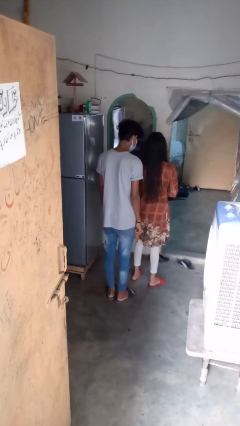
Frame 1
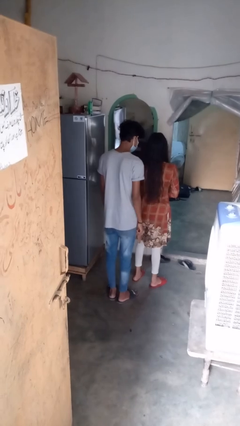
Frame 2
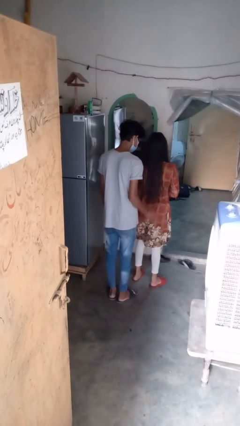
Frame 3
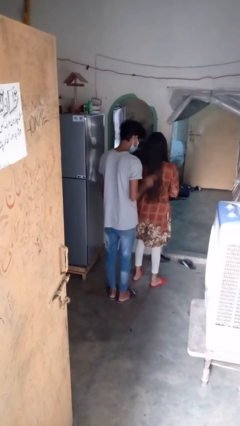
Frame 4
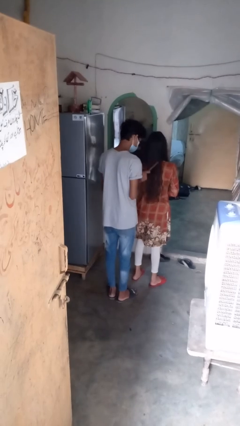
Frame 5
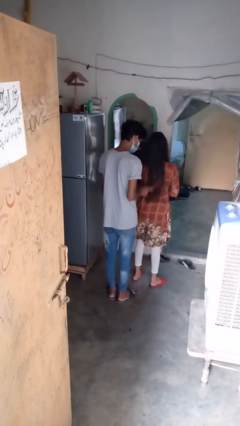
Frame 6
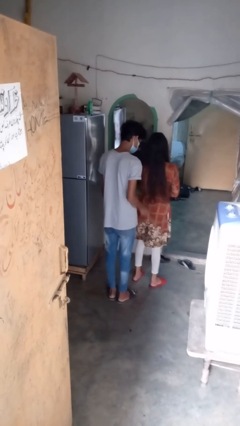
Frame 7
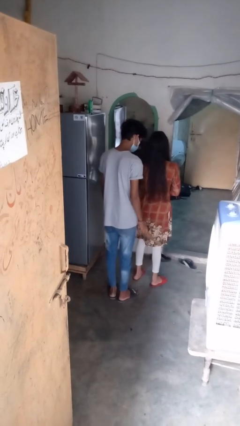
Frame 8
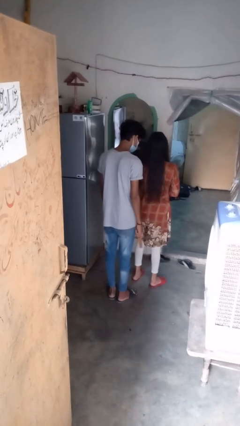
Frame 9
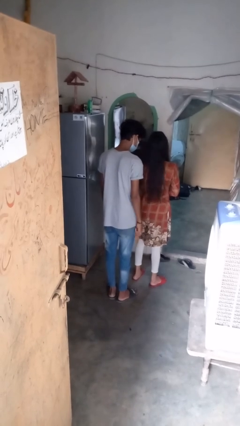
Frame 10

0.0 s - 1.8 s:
person brushes hair of person

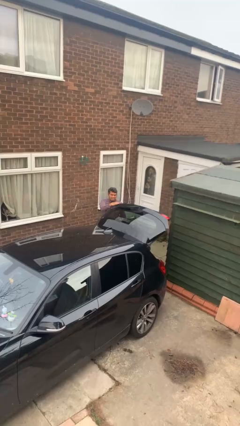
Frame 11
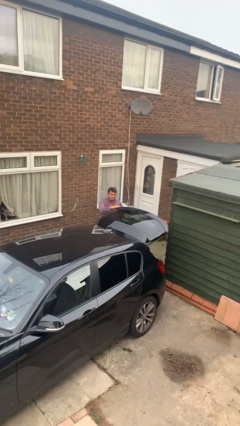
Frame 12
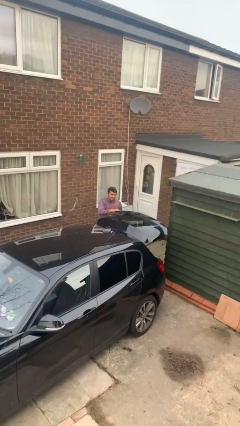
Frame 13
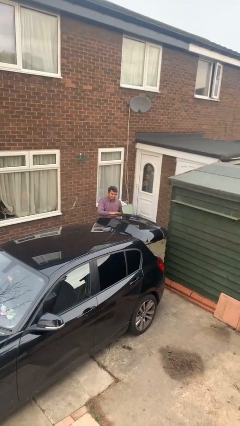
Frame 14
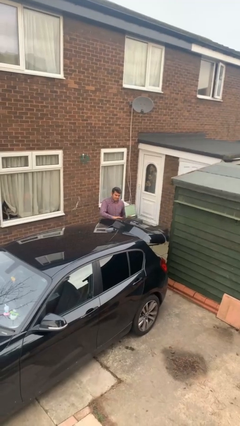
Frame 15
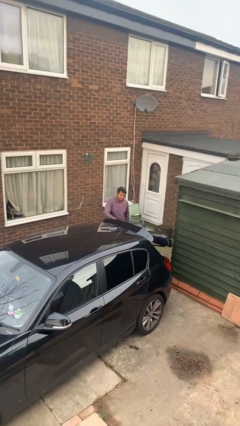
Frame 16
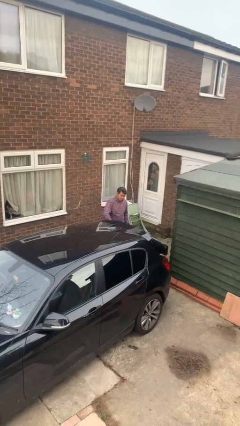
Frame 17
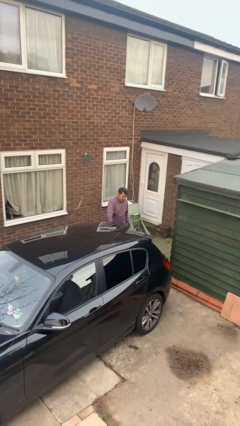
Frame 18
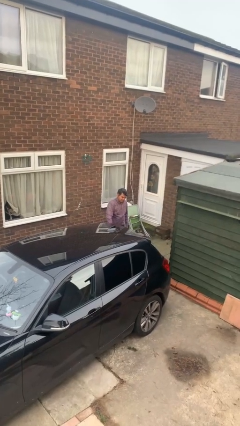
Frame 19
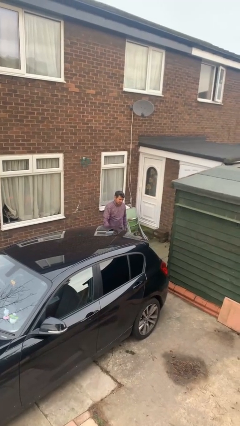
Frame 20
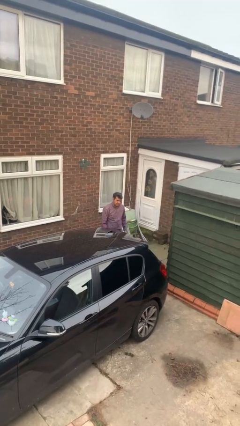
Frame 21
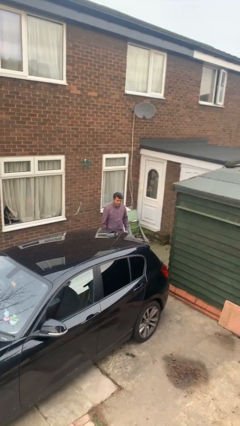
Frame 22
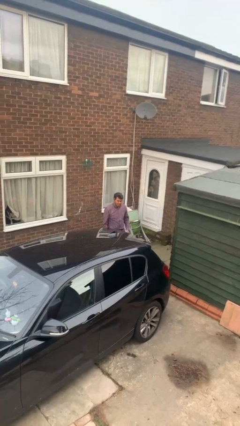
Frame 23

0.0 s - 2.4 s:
person closes car trunk

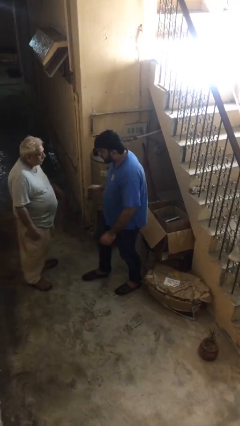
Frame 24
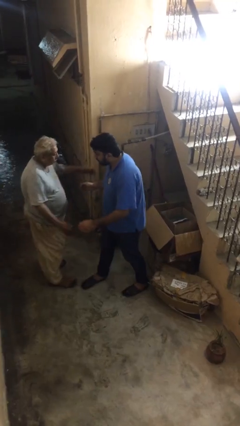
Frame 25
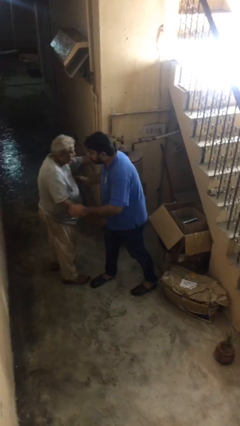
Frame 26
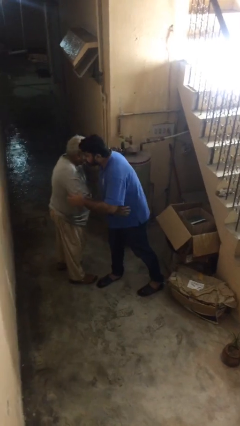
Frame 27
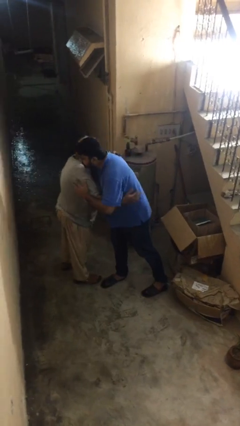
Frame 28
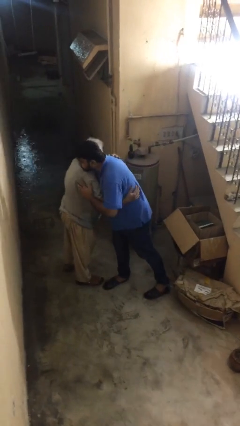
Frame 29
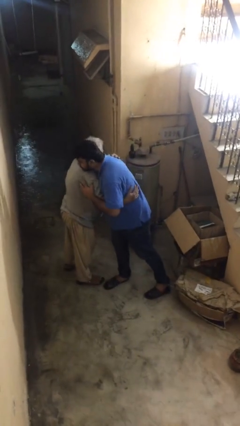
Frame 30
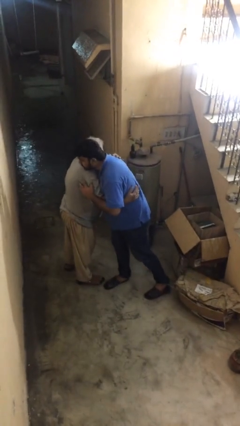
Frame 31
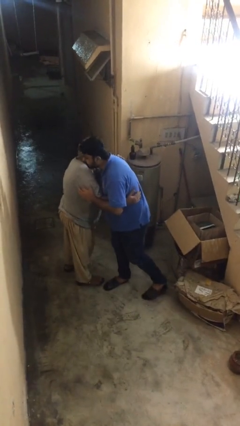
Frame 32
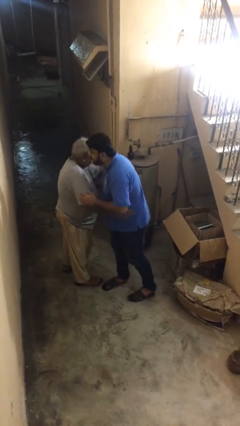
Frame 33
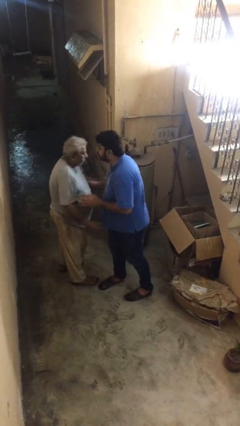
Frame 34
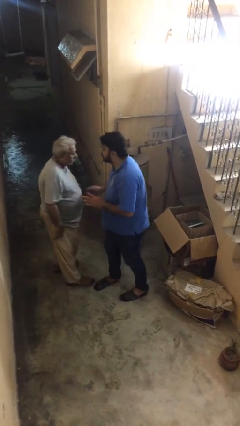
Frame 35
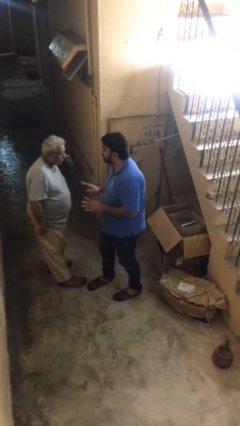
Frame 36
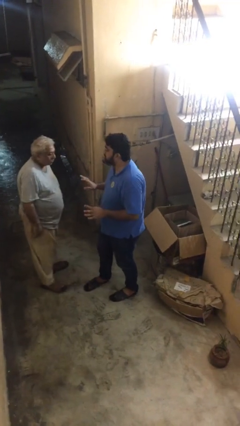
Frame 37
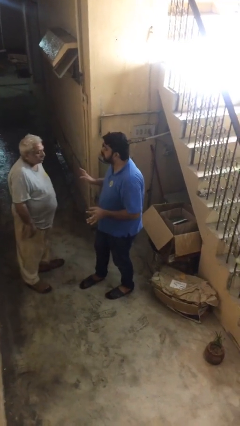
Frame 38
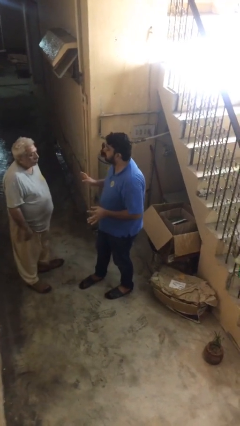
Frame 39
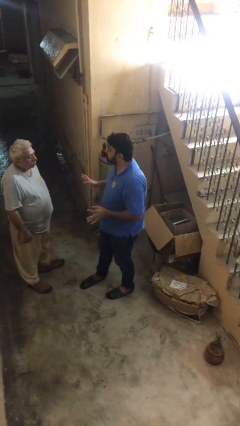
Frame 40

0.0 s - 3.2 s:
person embraces person

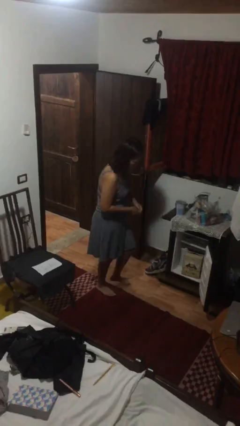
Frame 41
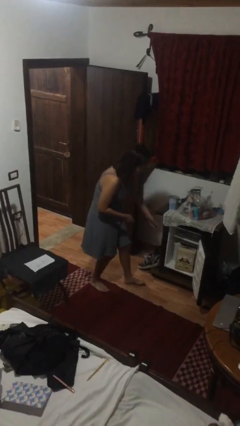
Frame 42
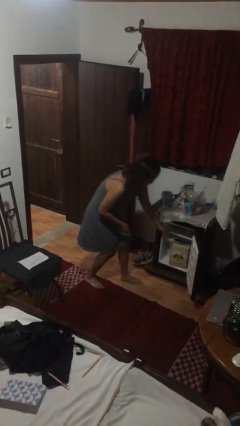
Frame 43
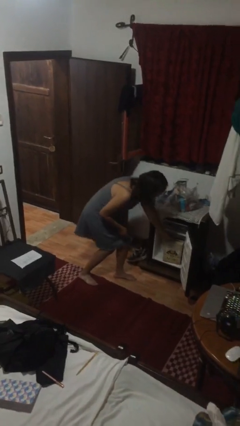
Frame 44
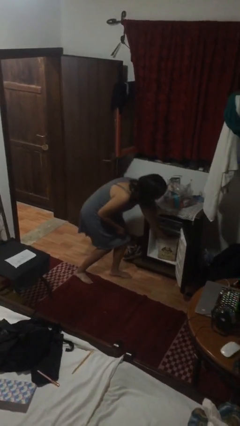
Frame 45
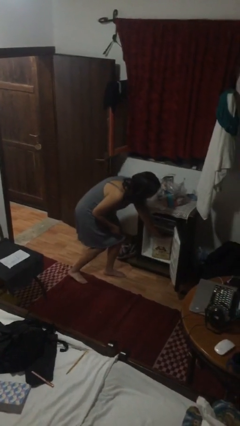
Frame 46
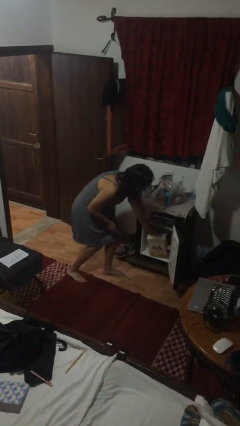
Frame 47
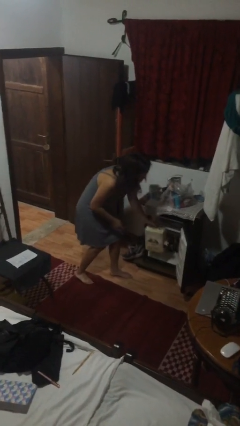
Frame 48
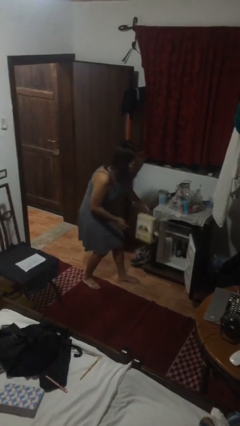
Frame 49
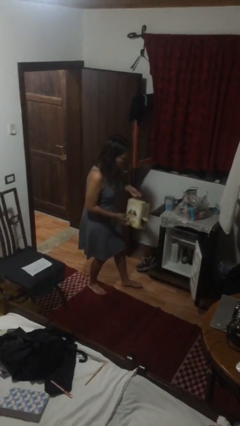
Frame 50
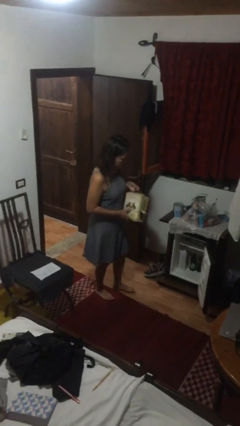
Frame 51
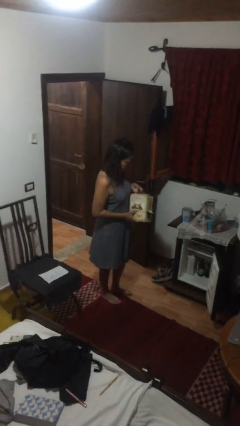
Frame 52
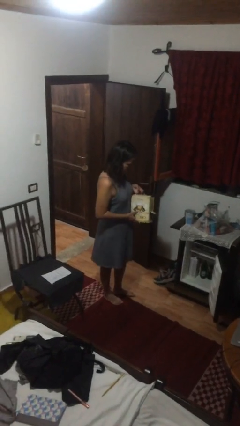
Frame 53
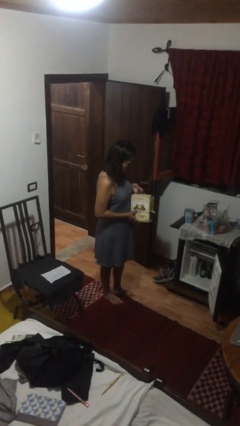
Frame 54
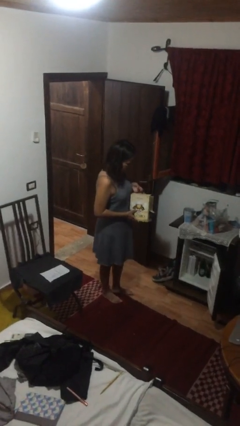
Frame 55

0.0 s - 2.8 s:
person picks up object from cabinet

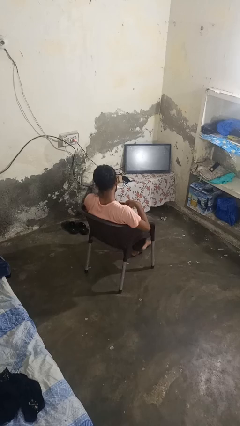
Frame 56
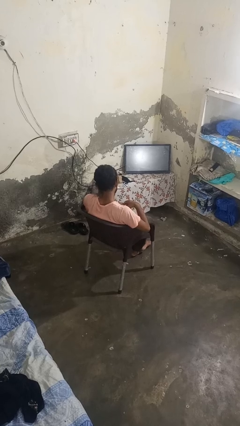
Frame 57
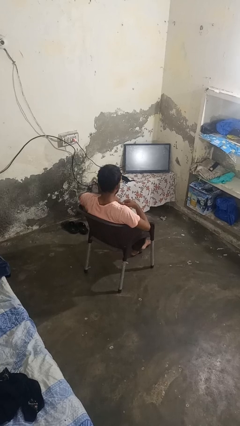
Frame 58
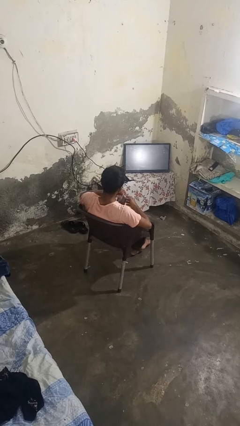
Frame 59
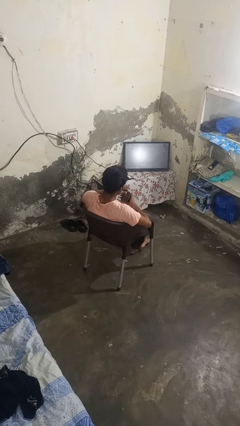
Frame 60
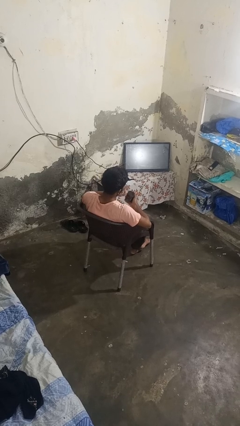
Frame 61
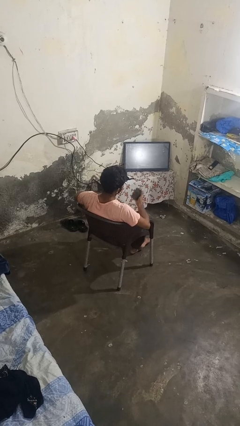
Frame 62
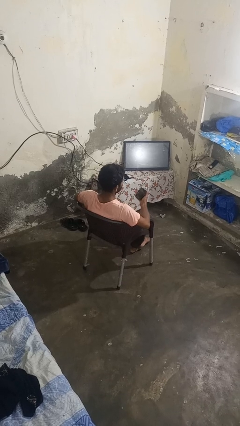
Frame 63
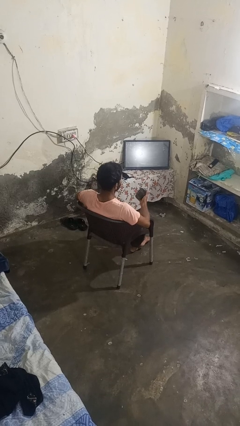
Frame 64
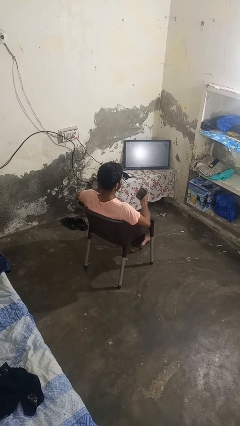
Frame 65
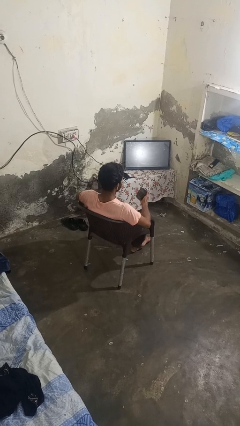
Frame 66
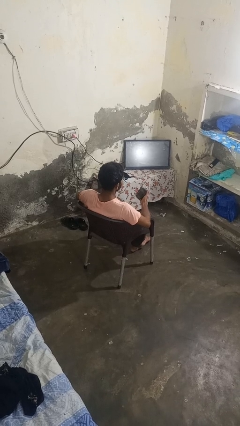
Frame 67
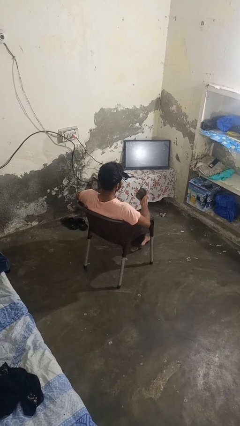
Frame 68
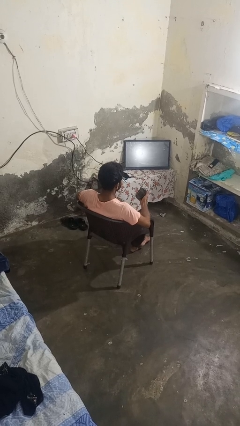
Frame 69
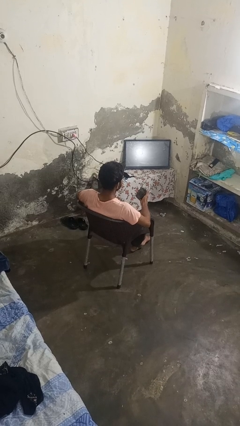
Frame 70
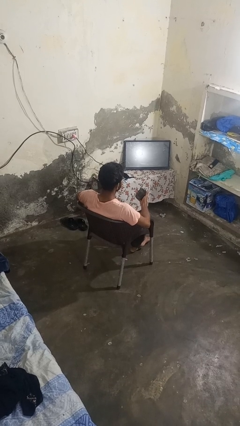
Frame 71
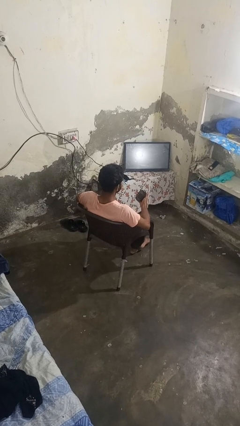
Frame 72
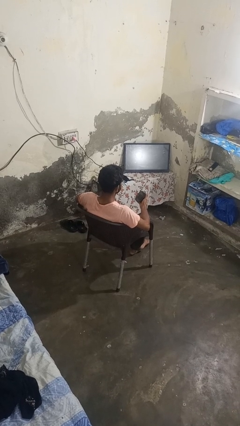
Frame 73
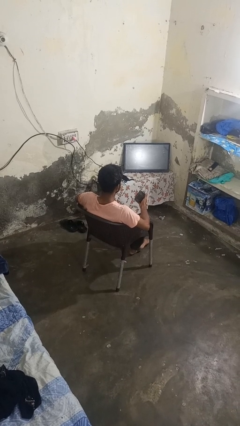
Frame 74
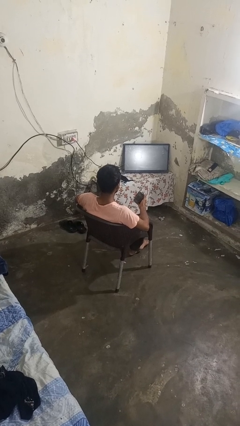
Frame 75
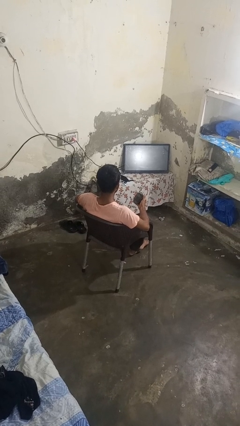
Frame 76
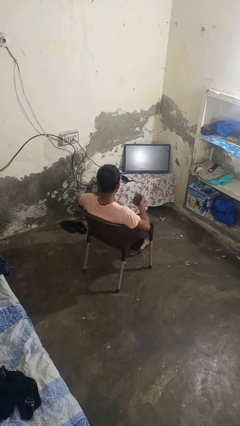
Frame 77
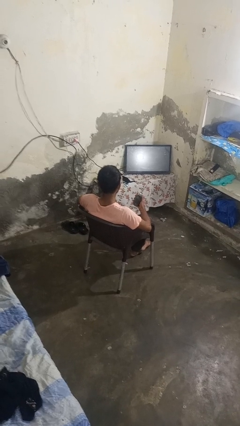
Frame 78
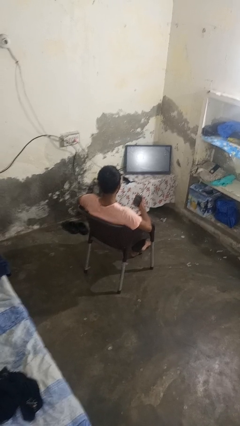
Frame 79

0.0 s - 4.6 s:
person takes object from purse

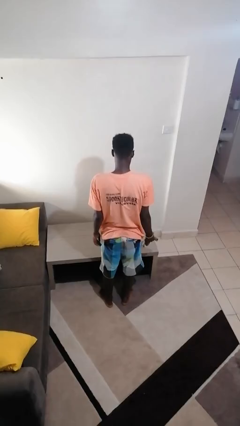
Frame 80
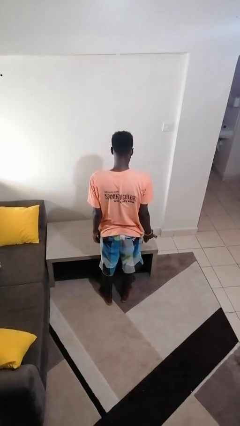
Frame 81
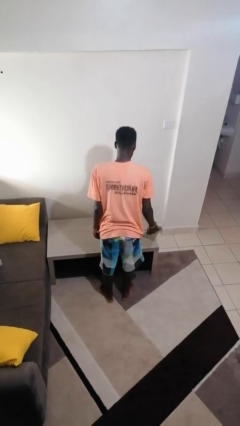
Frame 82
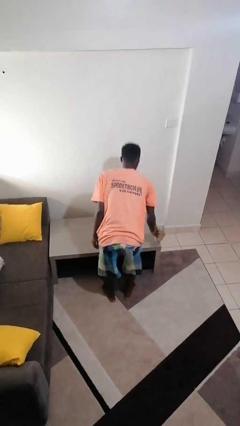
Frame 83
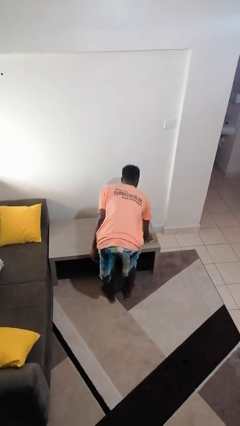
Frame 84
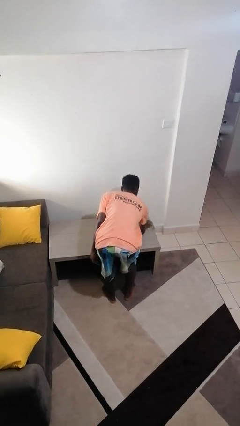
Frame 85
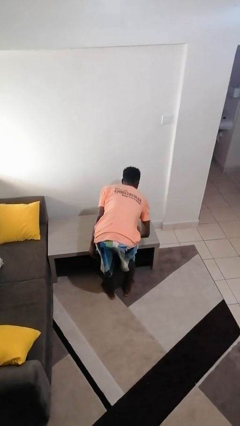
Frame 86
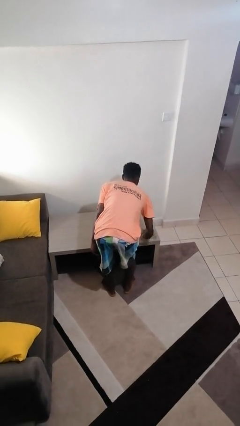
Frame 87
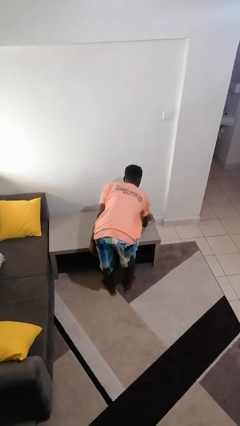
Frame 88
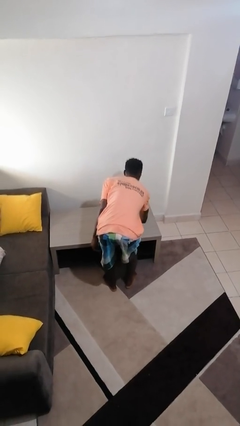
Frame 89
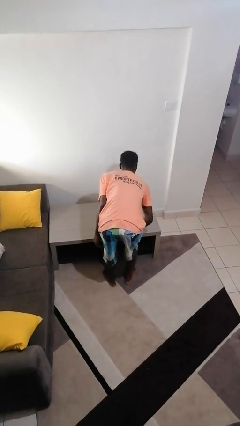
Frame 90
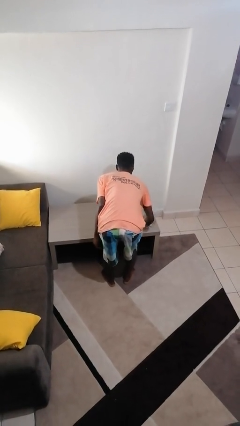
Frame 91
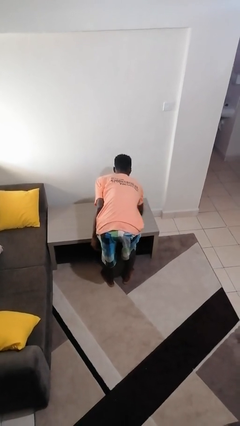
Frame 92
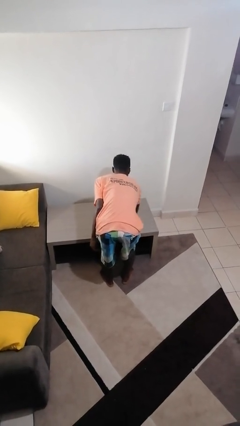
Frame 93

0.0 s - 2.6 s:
person cleans table with rag
